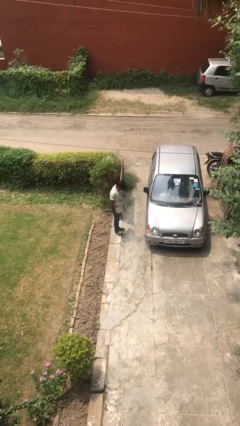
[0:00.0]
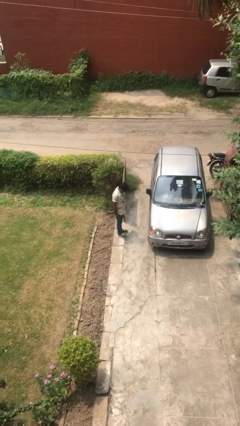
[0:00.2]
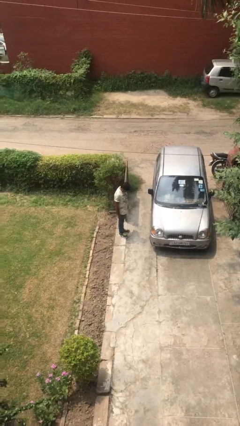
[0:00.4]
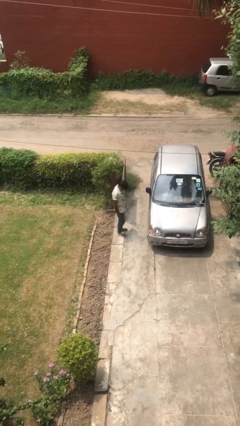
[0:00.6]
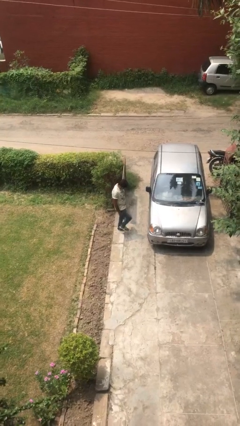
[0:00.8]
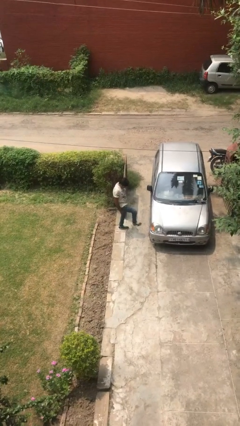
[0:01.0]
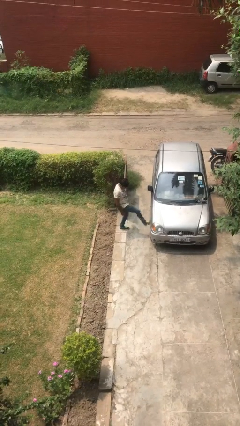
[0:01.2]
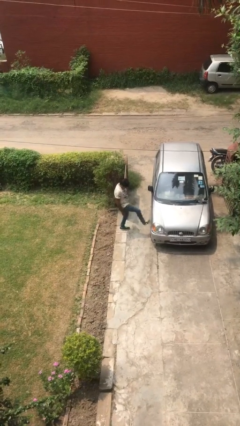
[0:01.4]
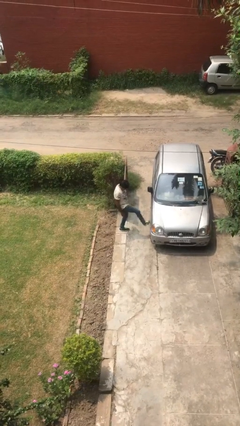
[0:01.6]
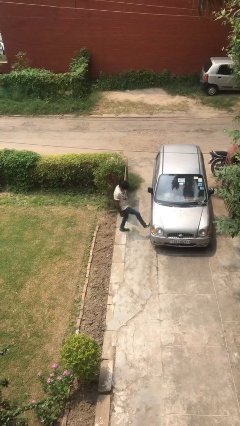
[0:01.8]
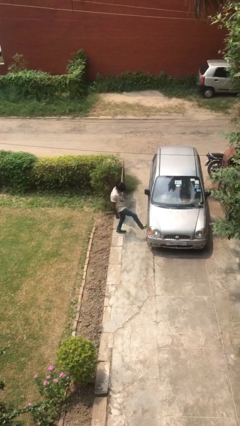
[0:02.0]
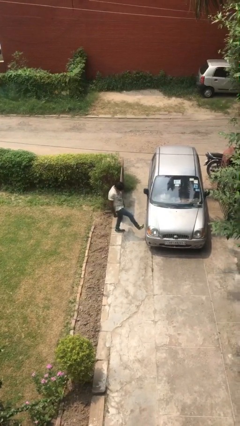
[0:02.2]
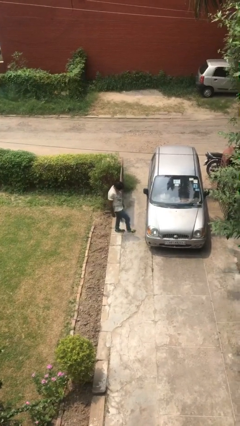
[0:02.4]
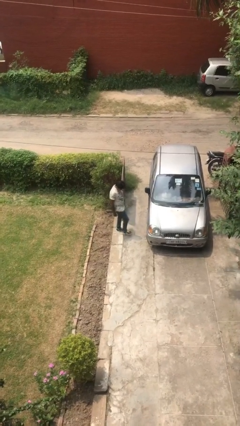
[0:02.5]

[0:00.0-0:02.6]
person kicks car tires

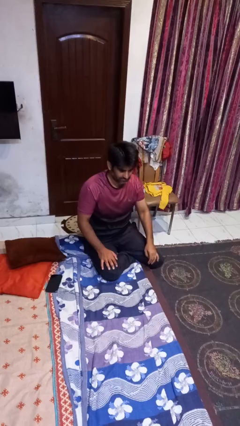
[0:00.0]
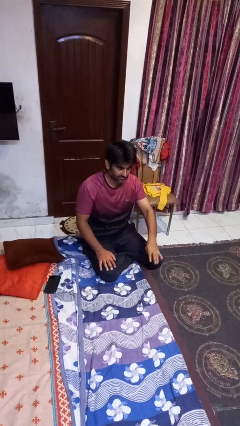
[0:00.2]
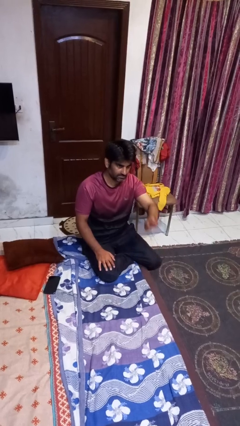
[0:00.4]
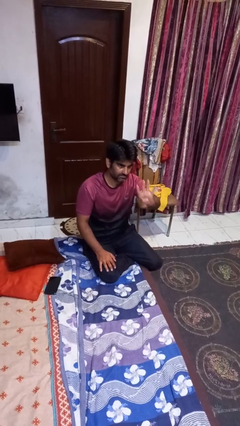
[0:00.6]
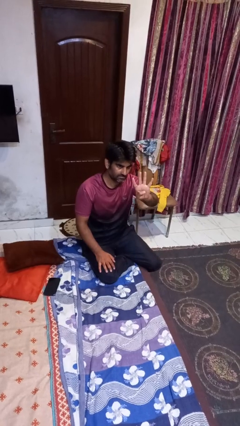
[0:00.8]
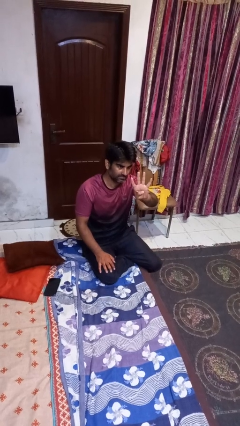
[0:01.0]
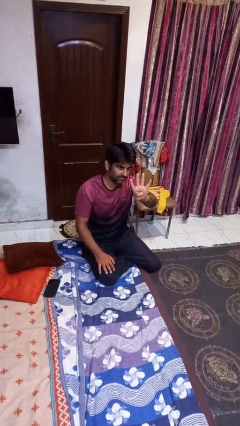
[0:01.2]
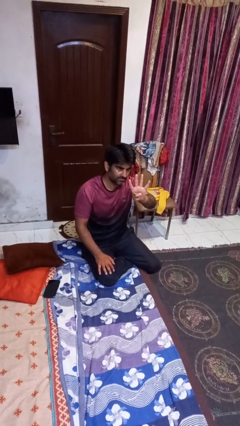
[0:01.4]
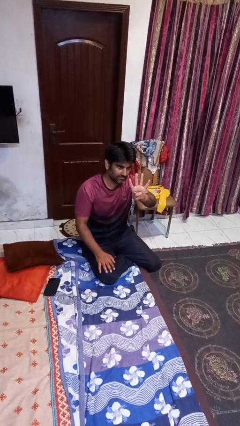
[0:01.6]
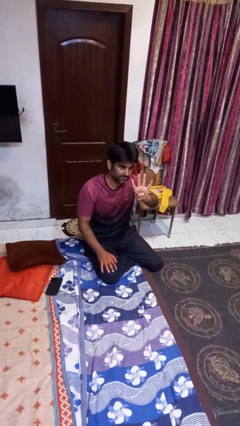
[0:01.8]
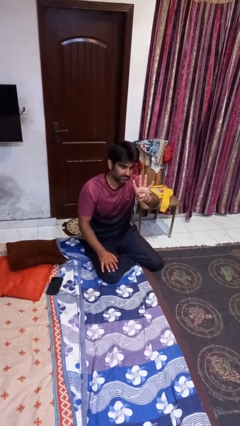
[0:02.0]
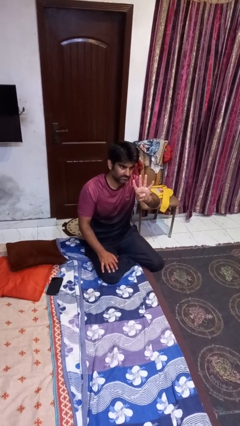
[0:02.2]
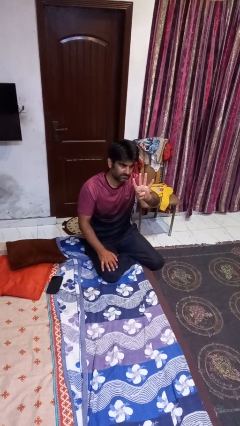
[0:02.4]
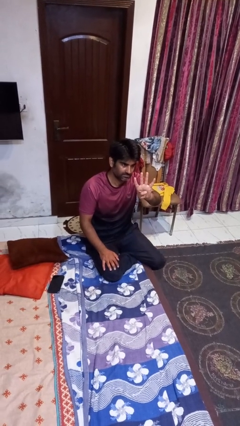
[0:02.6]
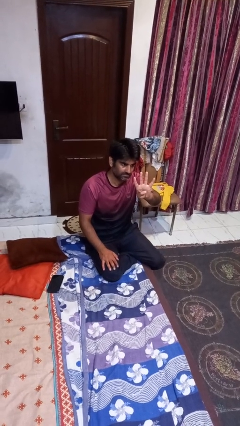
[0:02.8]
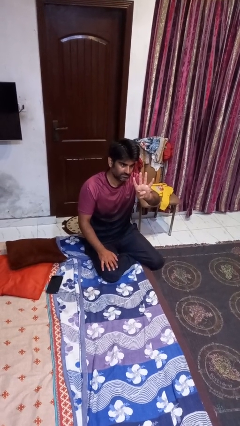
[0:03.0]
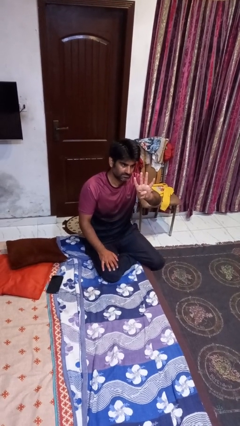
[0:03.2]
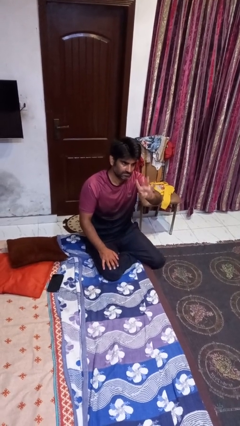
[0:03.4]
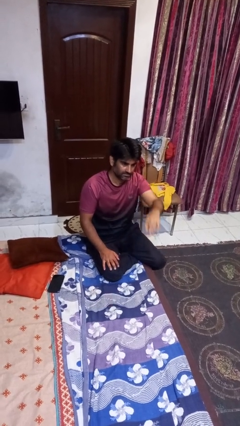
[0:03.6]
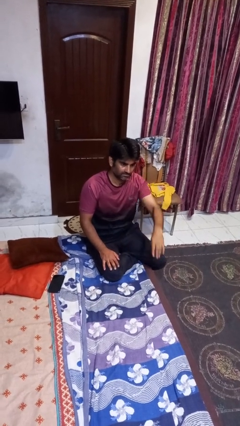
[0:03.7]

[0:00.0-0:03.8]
person gestures number four

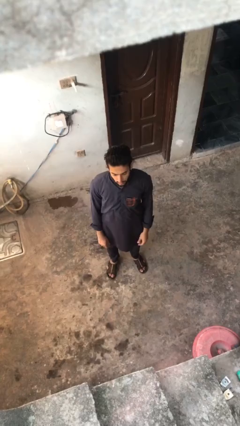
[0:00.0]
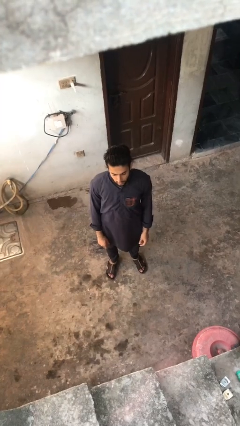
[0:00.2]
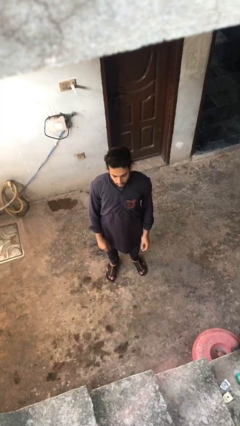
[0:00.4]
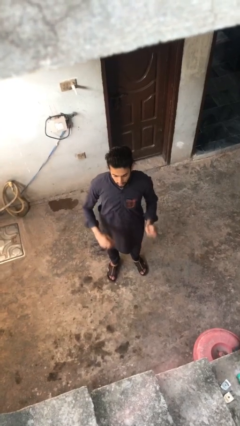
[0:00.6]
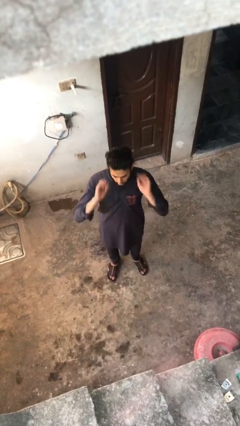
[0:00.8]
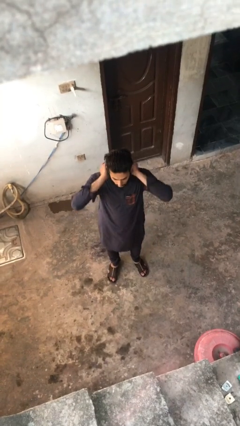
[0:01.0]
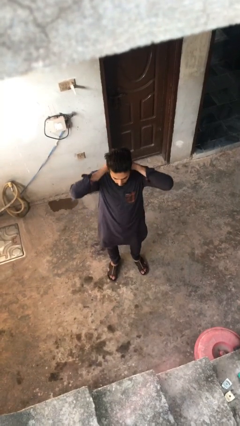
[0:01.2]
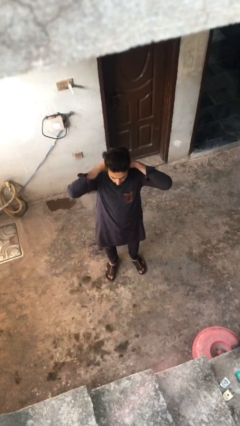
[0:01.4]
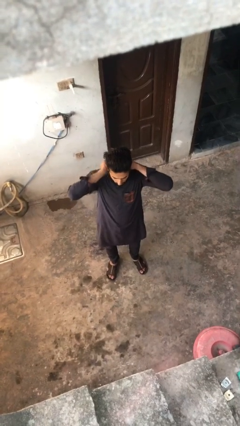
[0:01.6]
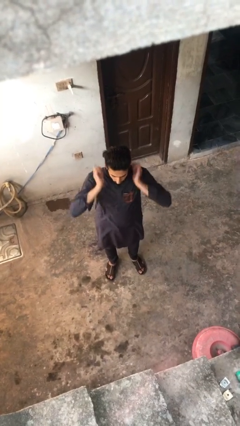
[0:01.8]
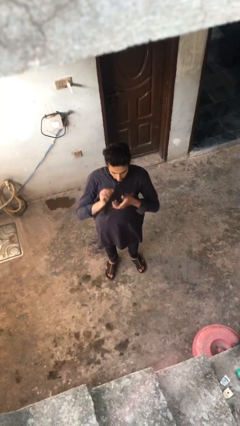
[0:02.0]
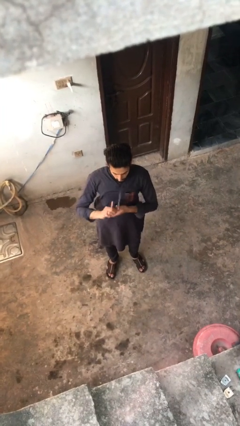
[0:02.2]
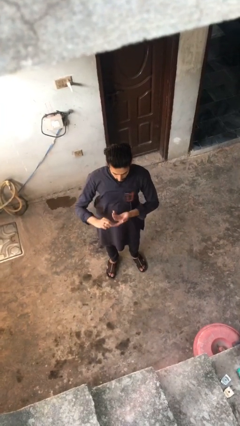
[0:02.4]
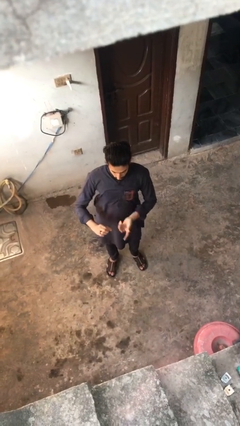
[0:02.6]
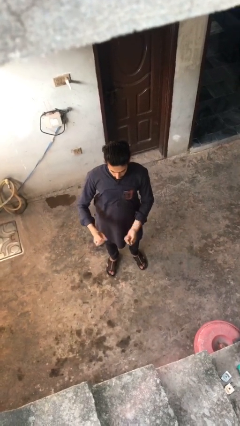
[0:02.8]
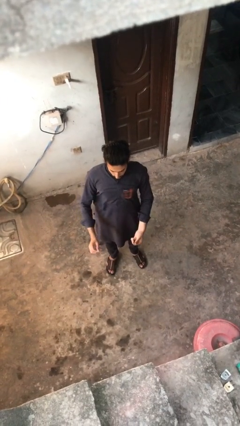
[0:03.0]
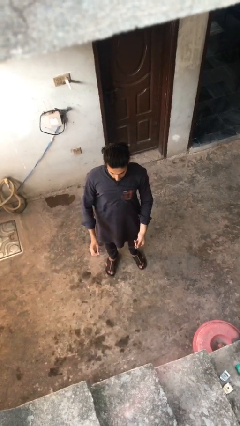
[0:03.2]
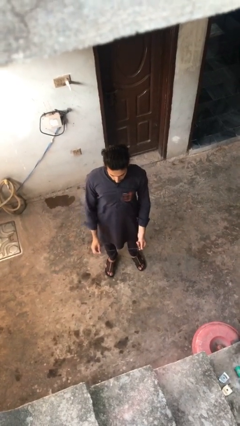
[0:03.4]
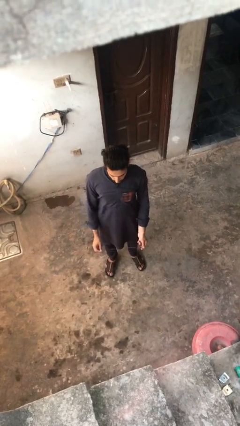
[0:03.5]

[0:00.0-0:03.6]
person takes off necklace

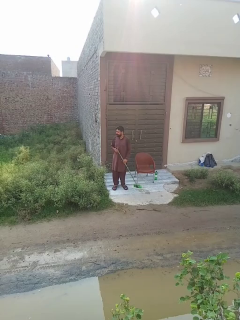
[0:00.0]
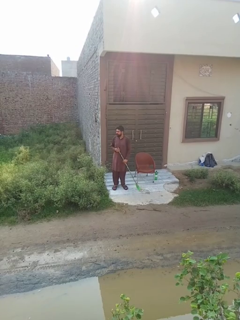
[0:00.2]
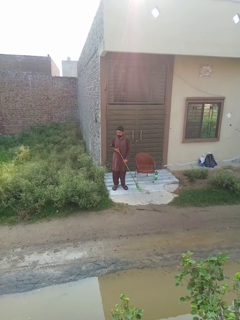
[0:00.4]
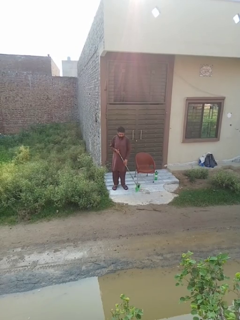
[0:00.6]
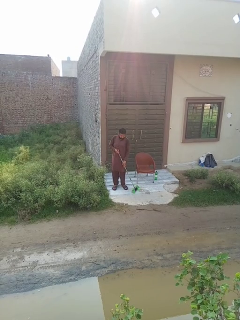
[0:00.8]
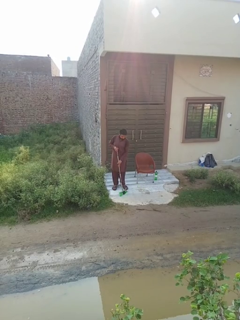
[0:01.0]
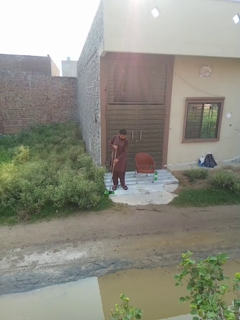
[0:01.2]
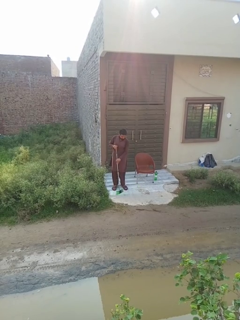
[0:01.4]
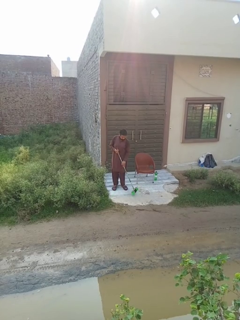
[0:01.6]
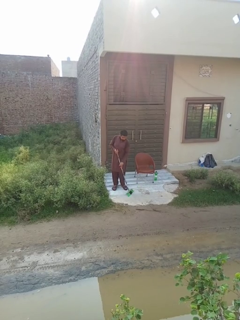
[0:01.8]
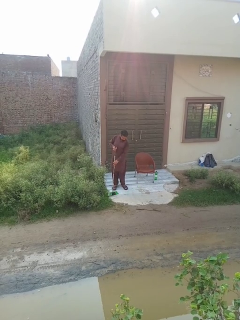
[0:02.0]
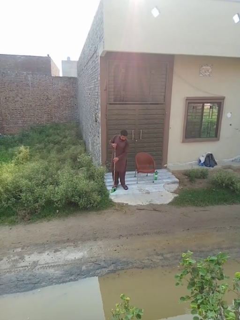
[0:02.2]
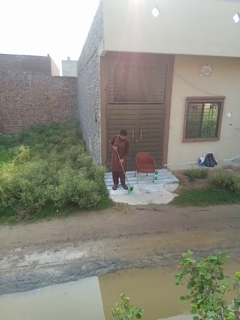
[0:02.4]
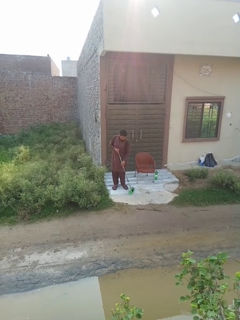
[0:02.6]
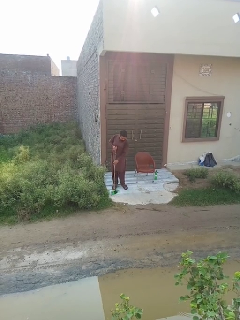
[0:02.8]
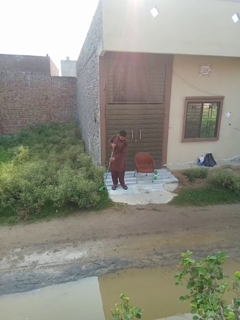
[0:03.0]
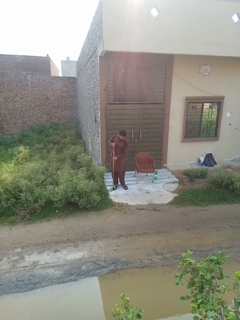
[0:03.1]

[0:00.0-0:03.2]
person sweeps floor

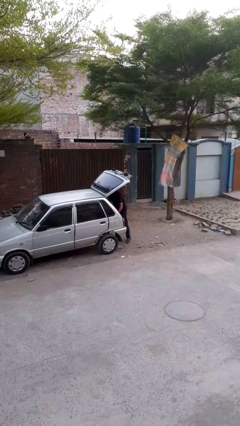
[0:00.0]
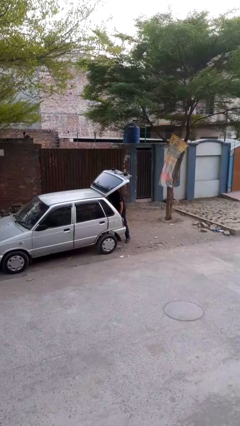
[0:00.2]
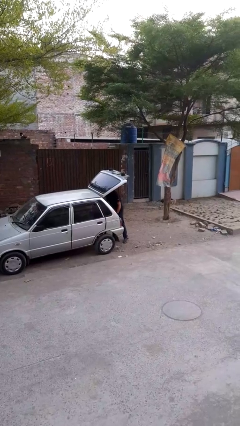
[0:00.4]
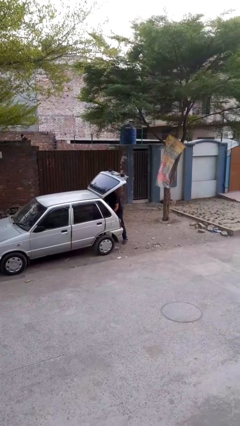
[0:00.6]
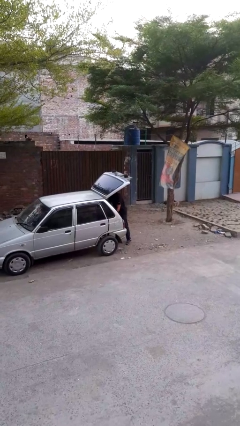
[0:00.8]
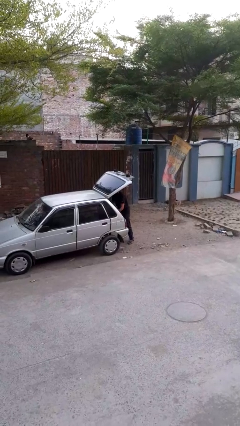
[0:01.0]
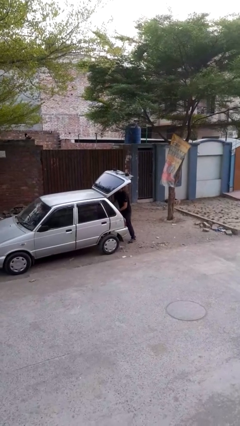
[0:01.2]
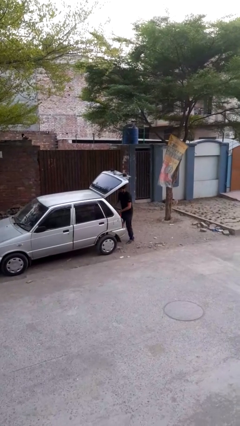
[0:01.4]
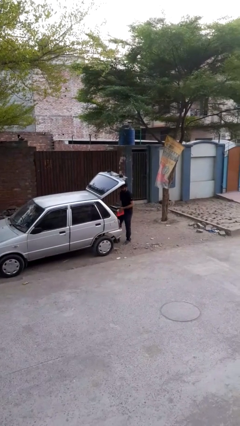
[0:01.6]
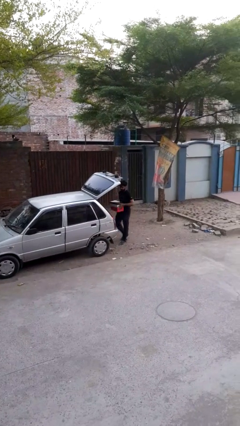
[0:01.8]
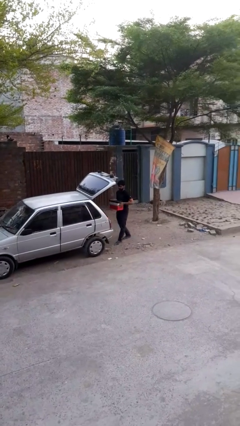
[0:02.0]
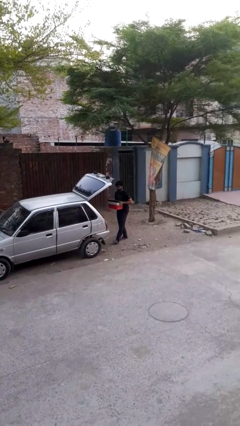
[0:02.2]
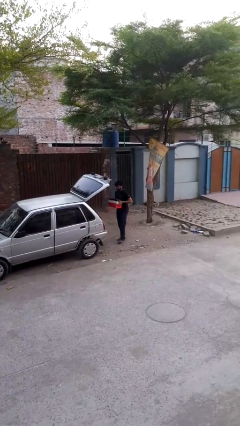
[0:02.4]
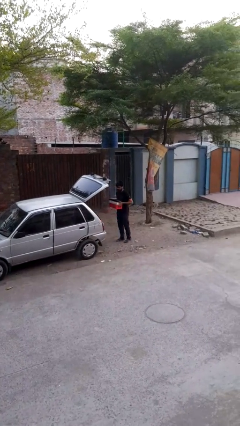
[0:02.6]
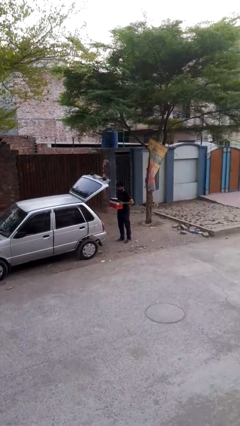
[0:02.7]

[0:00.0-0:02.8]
person unloads car

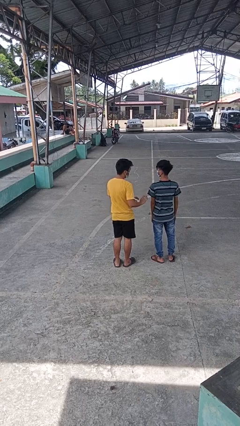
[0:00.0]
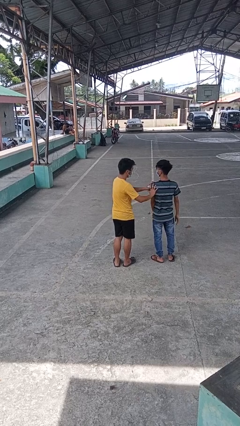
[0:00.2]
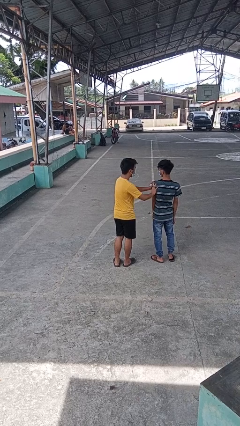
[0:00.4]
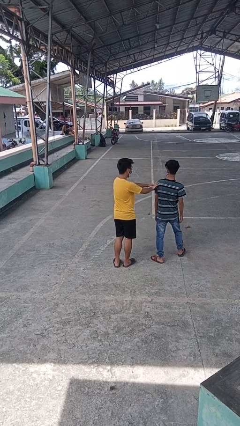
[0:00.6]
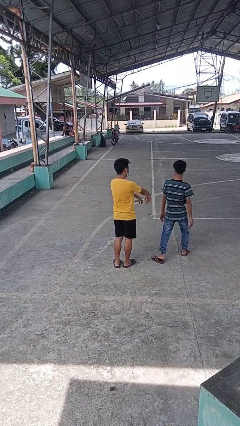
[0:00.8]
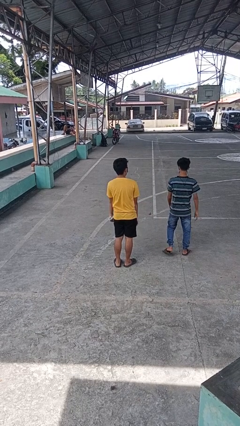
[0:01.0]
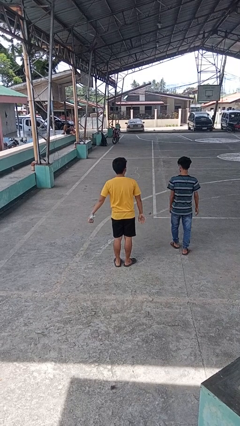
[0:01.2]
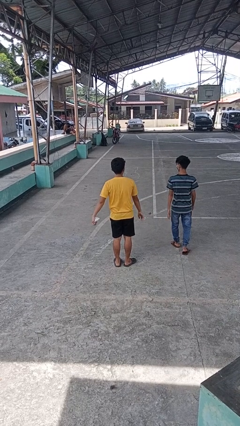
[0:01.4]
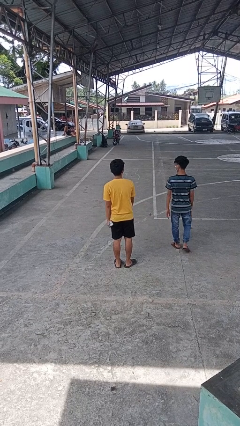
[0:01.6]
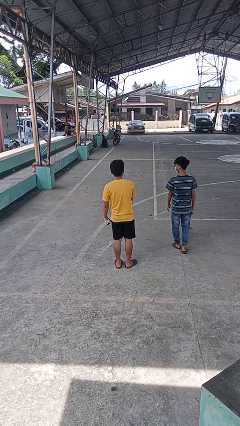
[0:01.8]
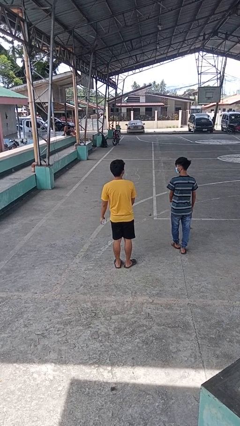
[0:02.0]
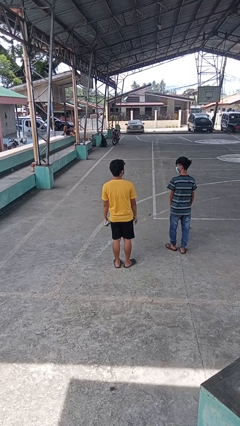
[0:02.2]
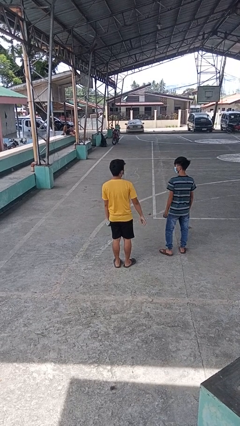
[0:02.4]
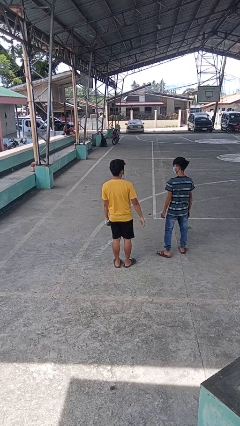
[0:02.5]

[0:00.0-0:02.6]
person shoves person
